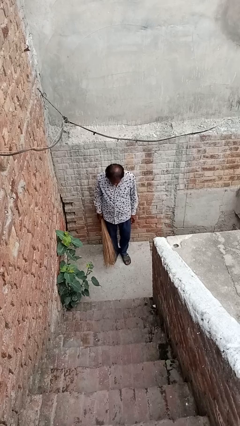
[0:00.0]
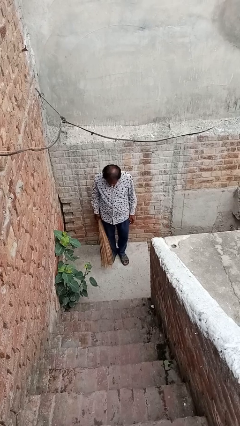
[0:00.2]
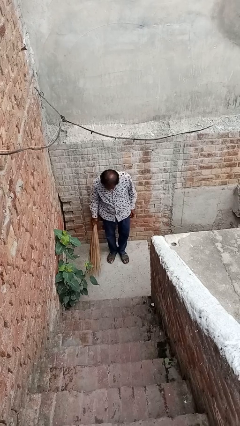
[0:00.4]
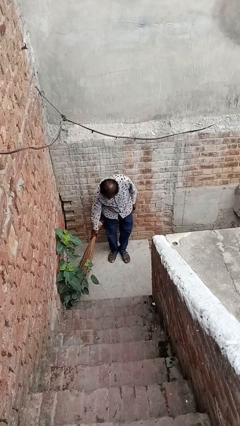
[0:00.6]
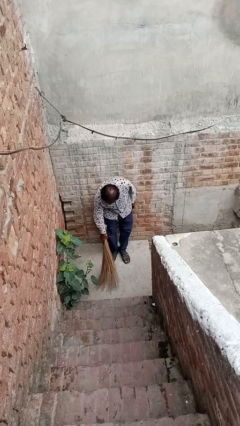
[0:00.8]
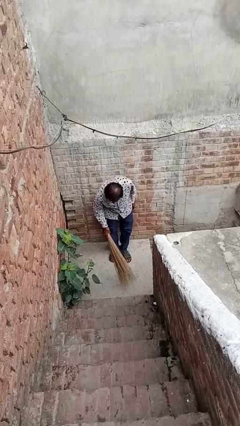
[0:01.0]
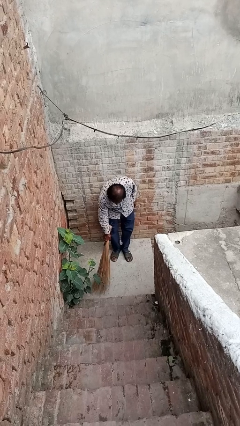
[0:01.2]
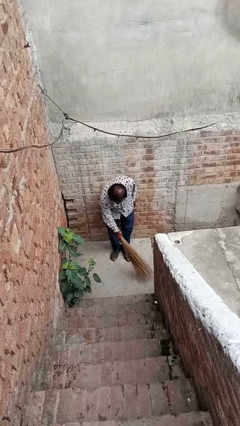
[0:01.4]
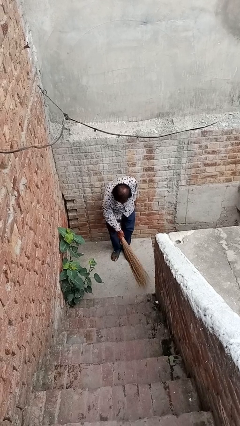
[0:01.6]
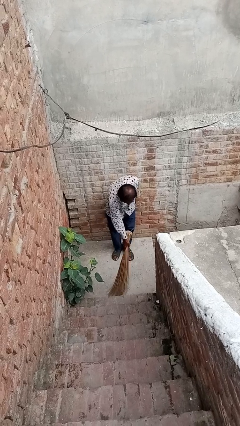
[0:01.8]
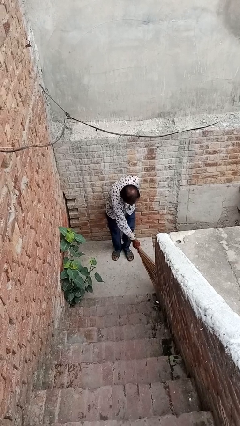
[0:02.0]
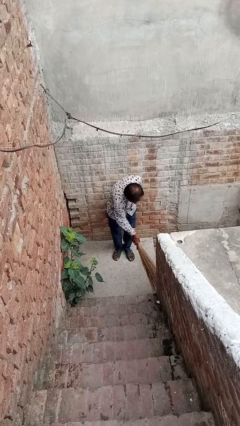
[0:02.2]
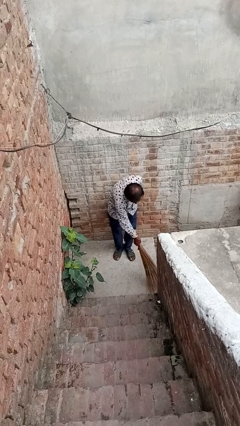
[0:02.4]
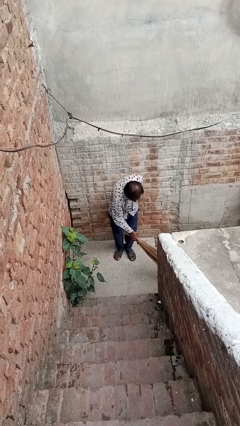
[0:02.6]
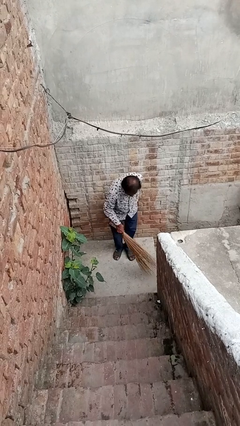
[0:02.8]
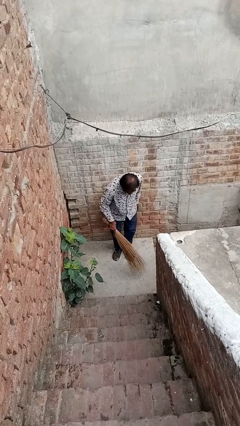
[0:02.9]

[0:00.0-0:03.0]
person sweeps floor

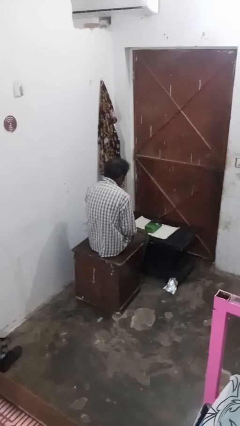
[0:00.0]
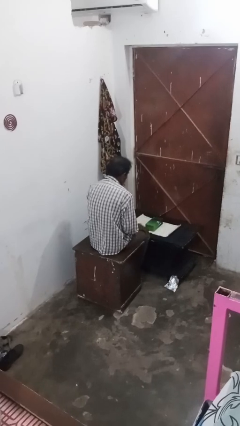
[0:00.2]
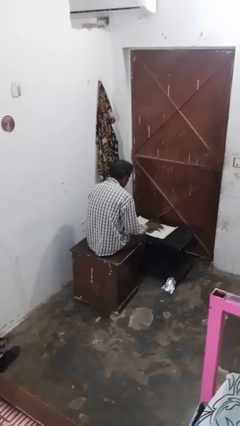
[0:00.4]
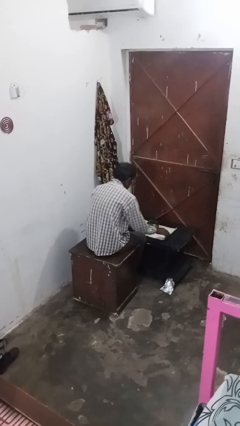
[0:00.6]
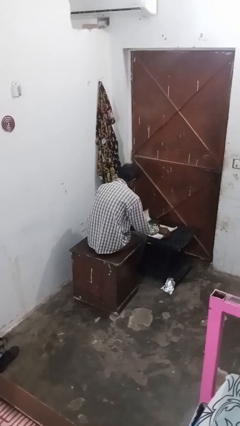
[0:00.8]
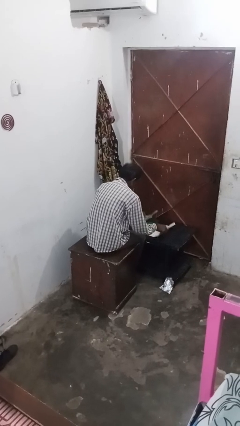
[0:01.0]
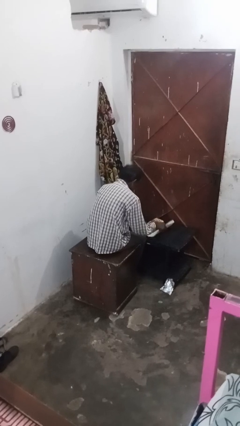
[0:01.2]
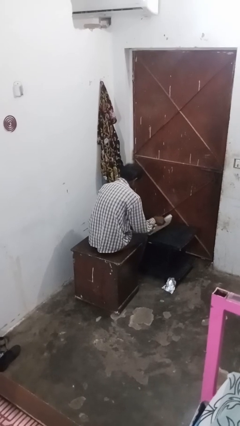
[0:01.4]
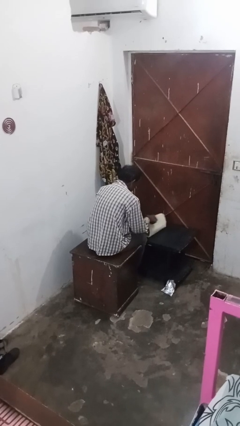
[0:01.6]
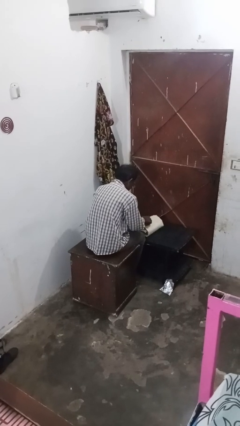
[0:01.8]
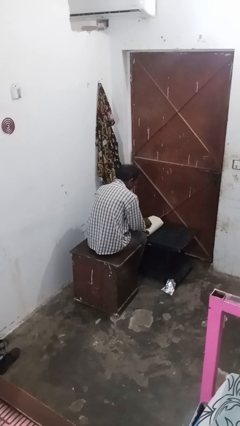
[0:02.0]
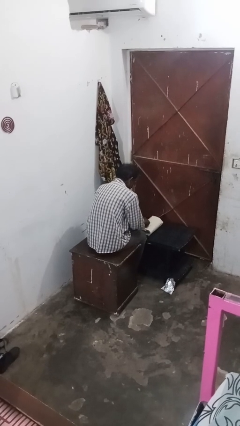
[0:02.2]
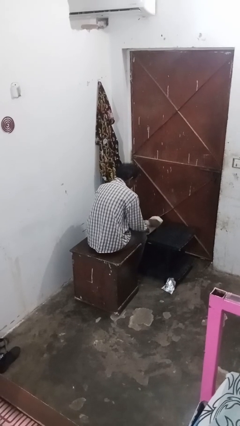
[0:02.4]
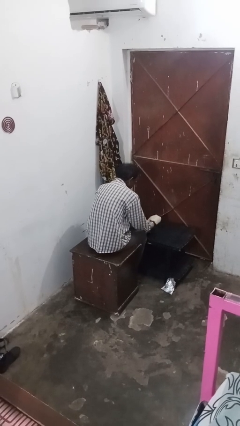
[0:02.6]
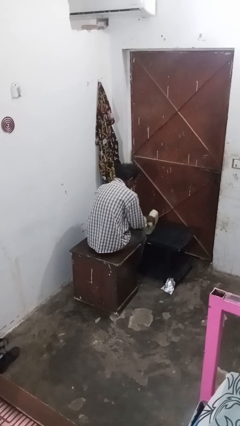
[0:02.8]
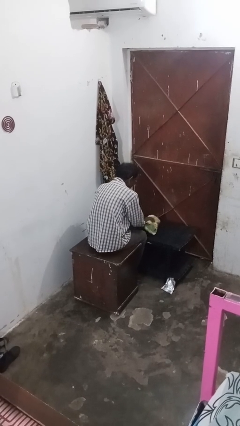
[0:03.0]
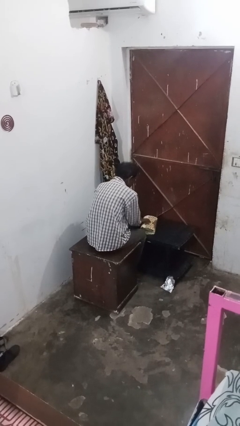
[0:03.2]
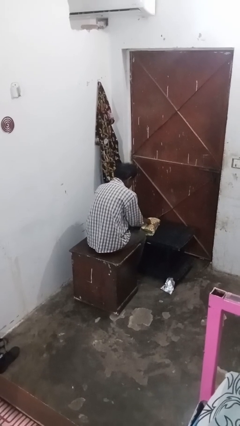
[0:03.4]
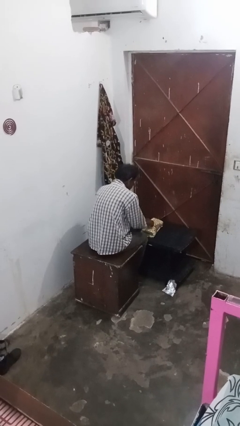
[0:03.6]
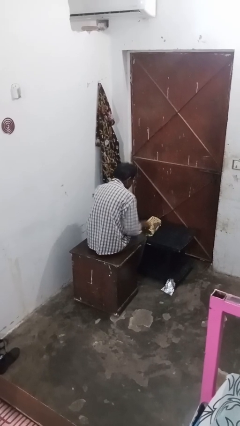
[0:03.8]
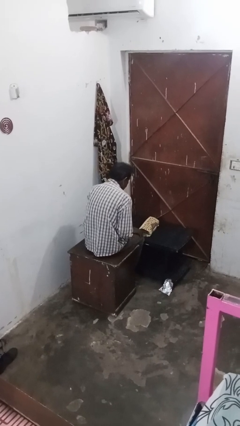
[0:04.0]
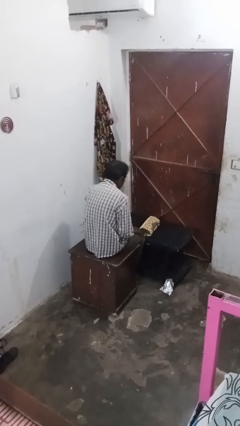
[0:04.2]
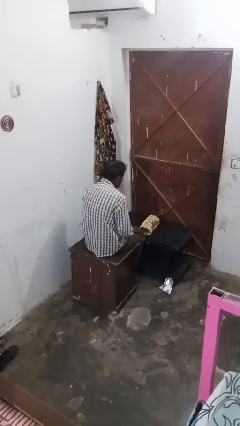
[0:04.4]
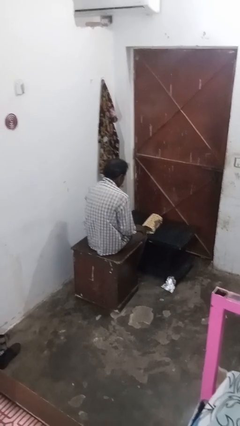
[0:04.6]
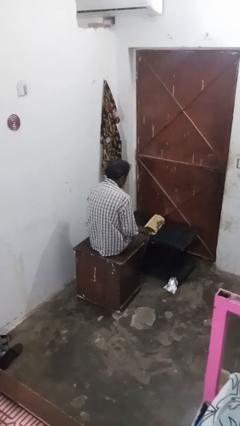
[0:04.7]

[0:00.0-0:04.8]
person wraps box

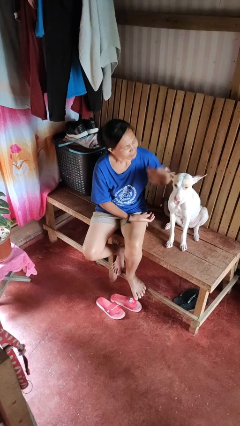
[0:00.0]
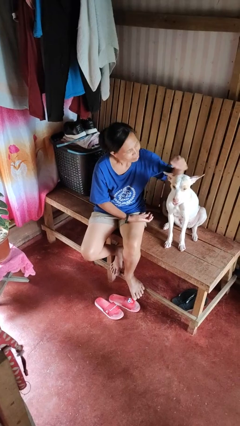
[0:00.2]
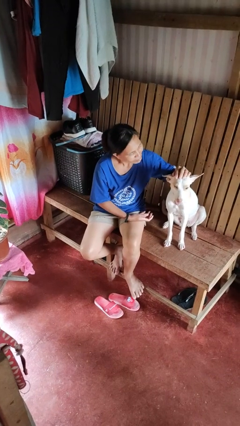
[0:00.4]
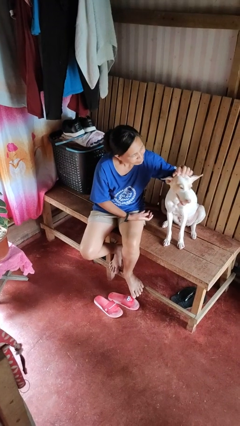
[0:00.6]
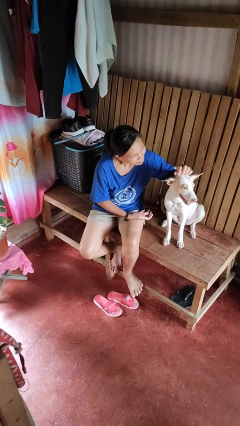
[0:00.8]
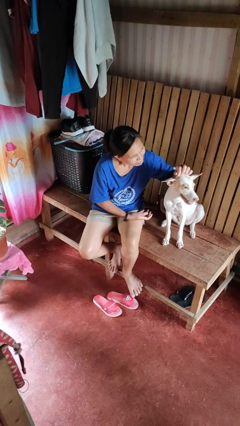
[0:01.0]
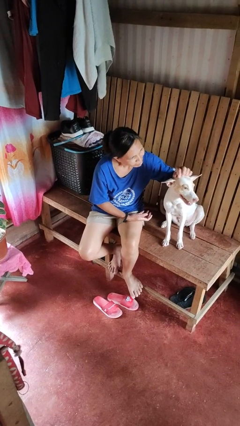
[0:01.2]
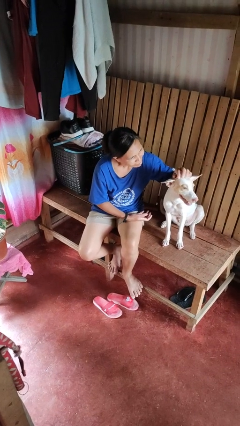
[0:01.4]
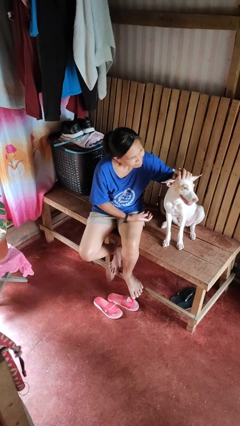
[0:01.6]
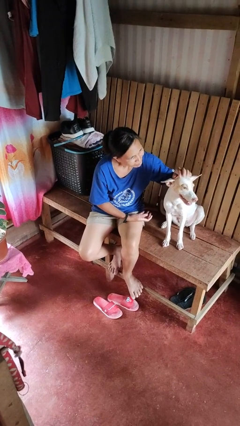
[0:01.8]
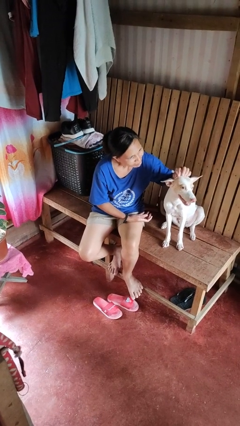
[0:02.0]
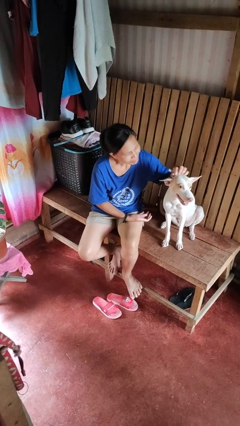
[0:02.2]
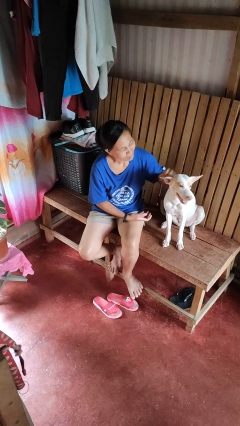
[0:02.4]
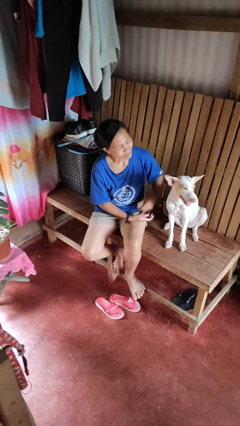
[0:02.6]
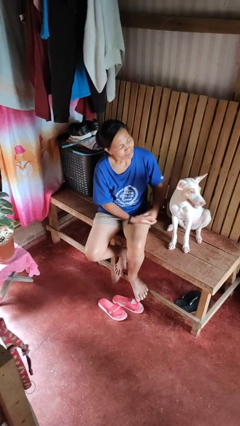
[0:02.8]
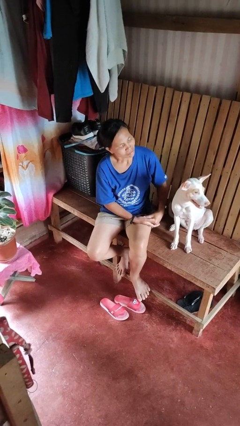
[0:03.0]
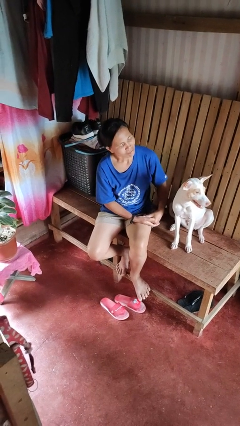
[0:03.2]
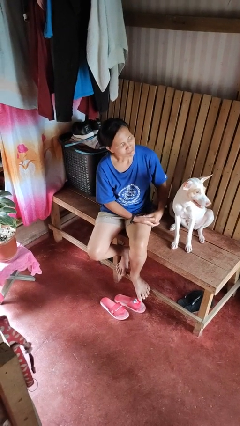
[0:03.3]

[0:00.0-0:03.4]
person pets dog

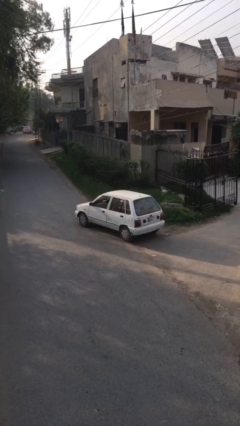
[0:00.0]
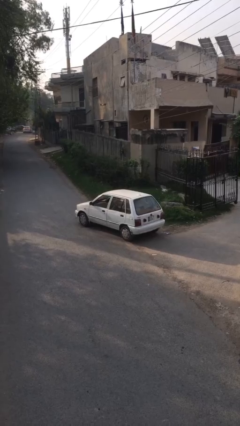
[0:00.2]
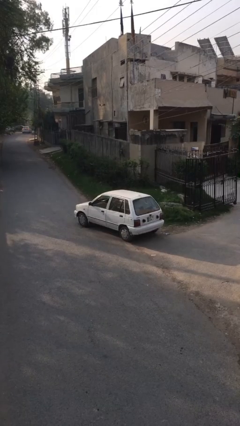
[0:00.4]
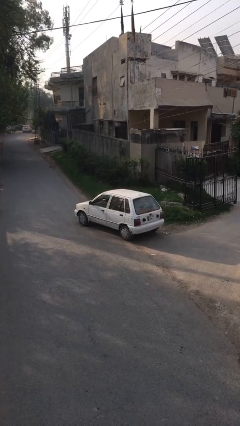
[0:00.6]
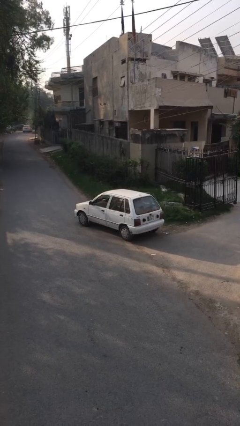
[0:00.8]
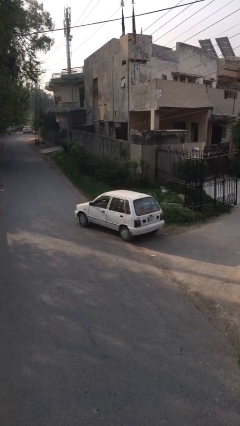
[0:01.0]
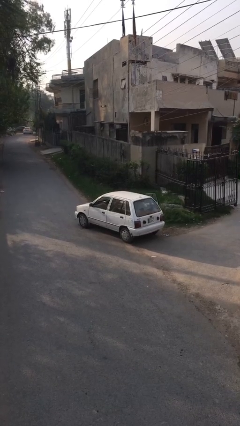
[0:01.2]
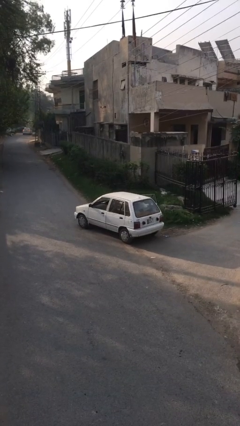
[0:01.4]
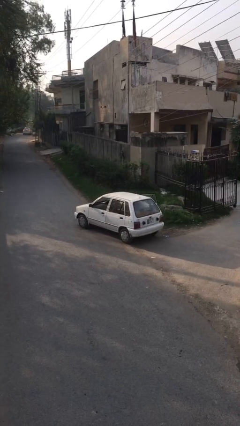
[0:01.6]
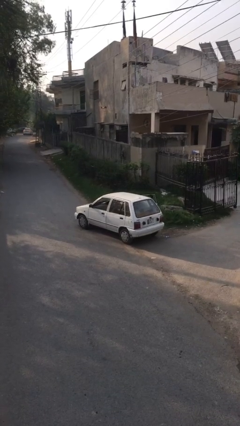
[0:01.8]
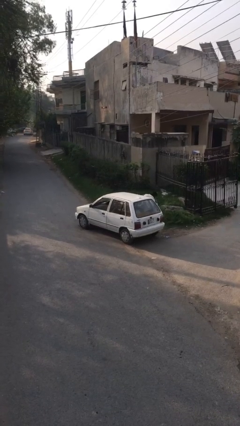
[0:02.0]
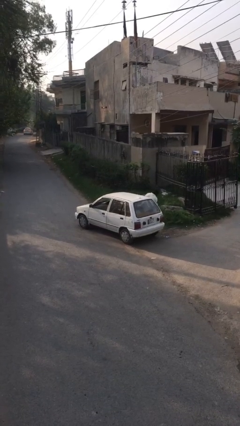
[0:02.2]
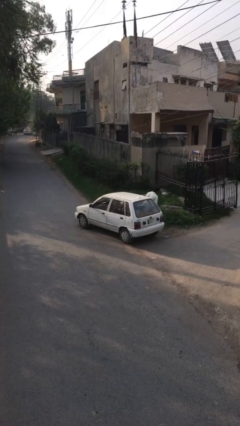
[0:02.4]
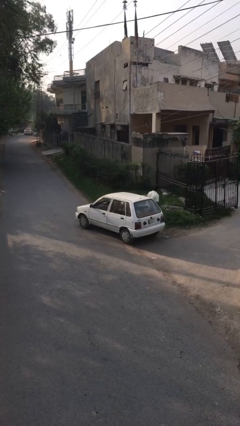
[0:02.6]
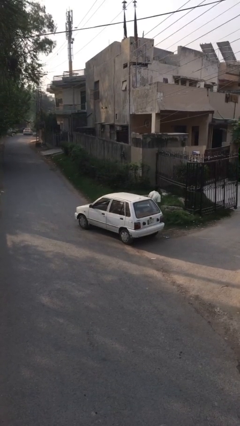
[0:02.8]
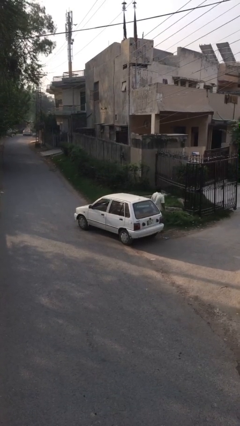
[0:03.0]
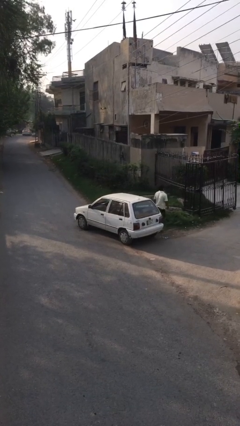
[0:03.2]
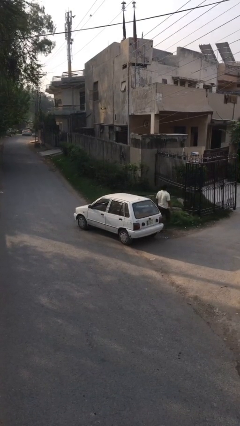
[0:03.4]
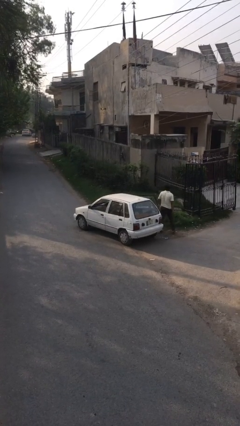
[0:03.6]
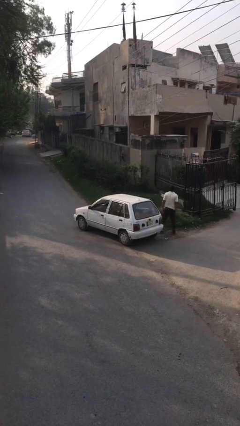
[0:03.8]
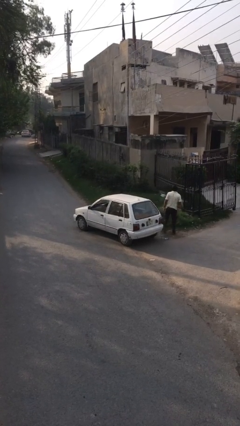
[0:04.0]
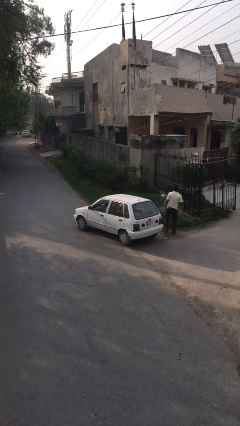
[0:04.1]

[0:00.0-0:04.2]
car drops off person

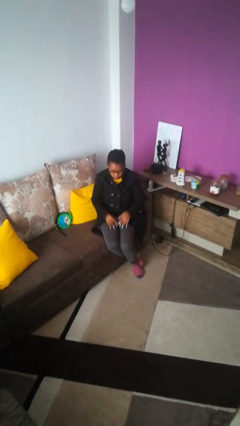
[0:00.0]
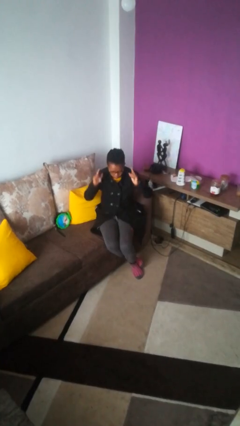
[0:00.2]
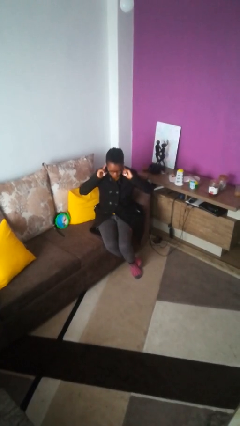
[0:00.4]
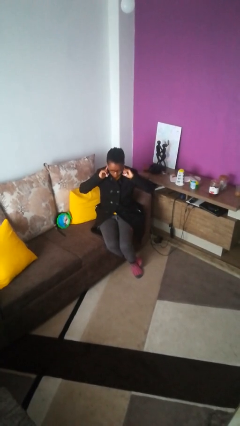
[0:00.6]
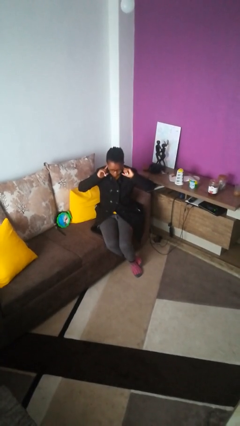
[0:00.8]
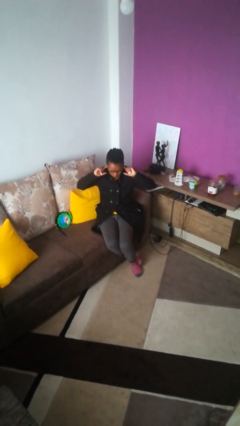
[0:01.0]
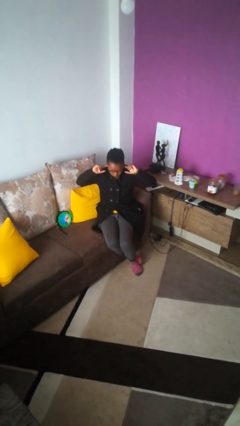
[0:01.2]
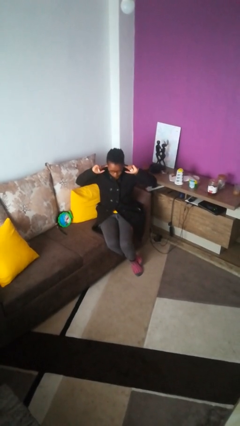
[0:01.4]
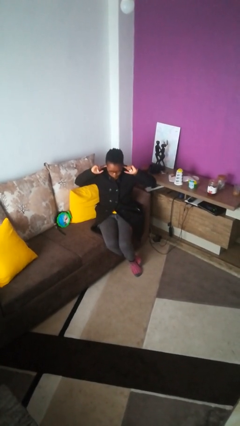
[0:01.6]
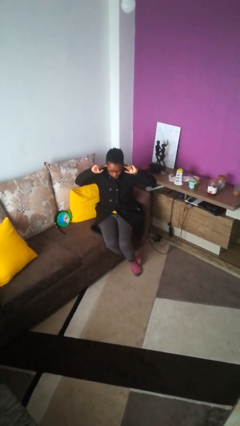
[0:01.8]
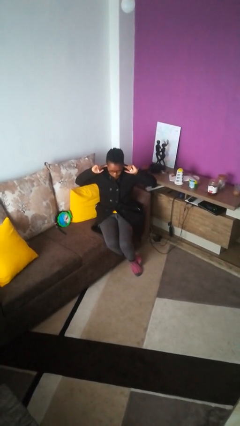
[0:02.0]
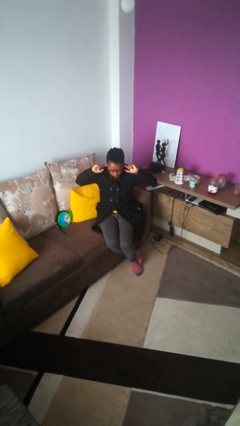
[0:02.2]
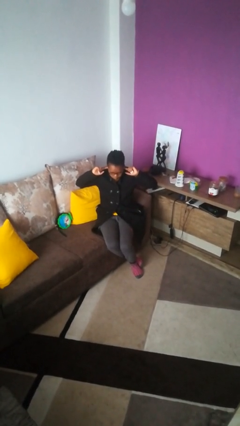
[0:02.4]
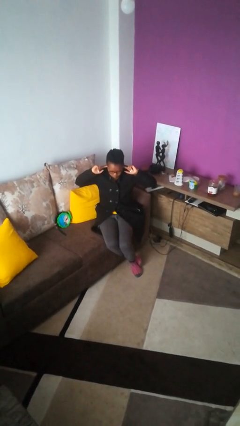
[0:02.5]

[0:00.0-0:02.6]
person puts fingers in ear
